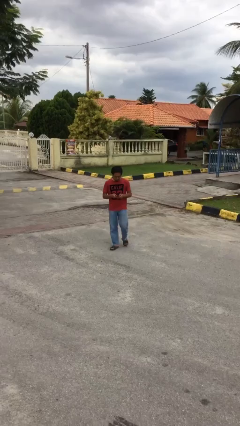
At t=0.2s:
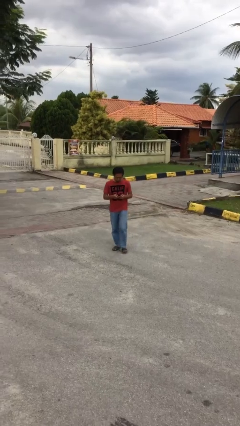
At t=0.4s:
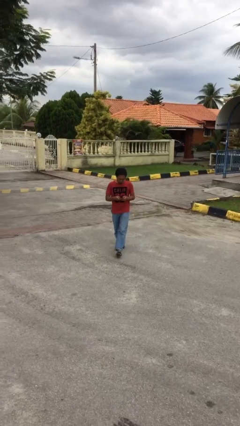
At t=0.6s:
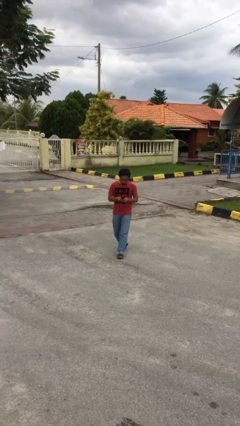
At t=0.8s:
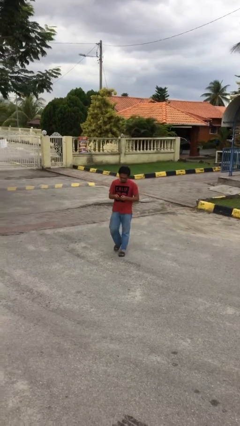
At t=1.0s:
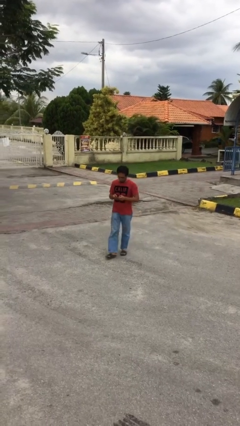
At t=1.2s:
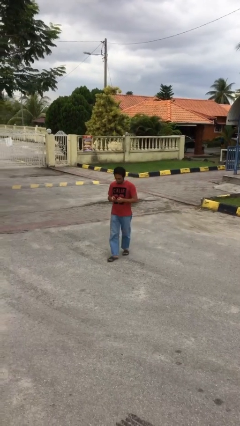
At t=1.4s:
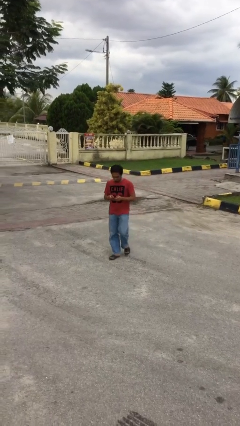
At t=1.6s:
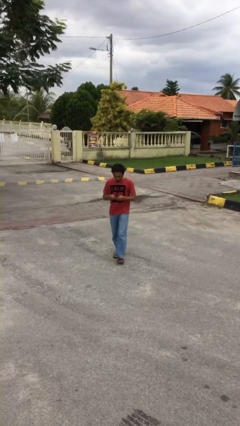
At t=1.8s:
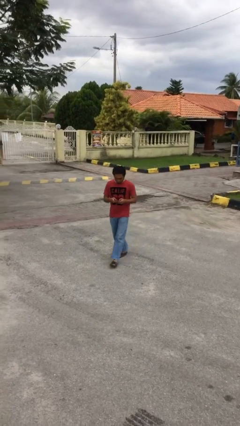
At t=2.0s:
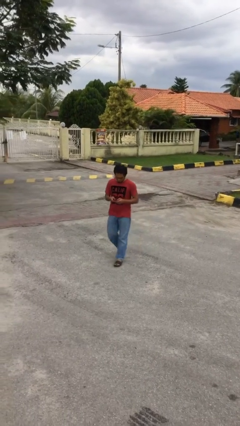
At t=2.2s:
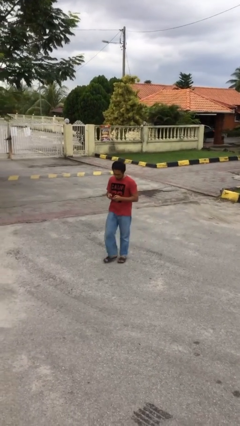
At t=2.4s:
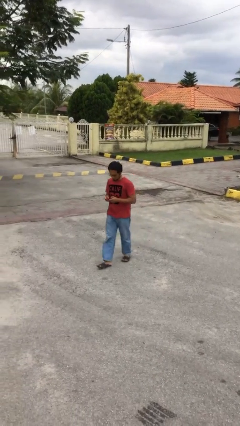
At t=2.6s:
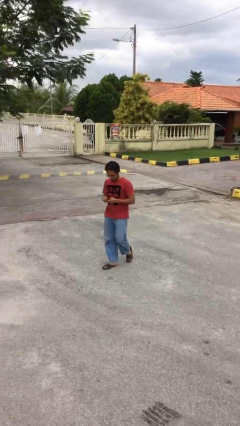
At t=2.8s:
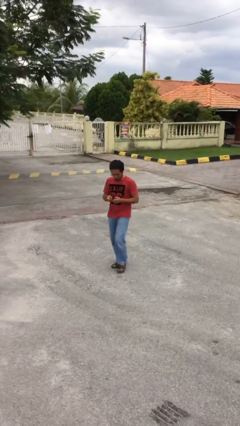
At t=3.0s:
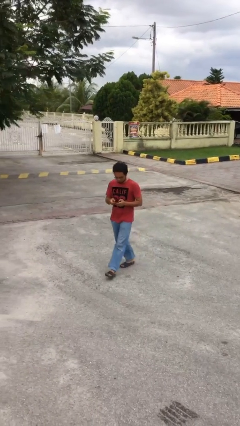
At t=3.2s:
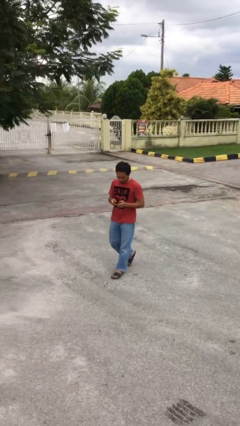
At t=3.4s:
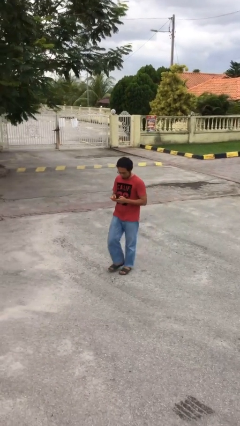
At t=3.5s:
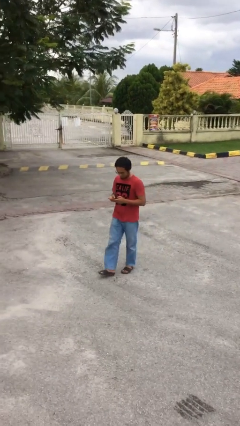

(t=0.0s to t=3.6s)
person texts on phone

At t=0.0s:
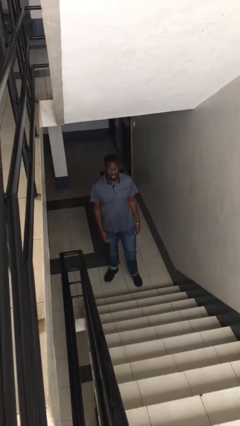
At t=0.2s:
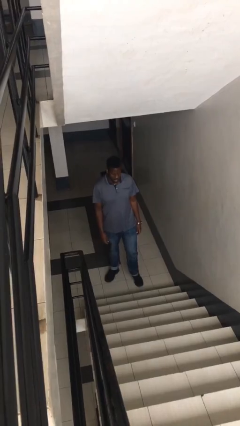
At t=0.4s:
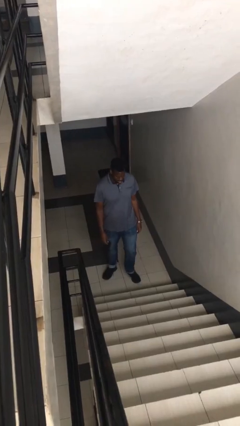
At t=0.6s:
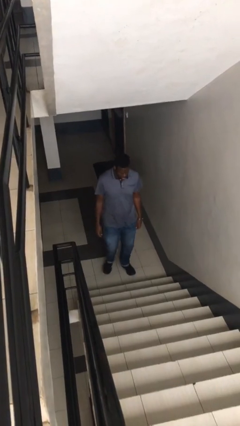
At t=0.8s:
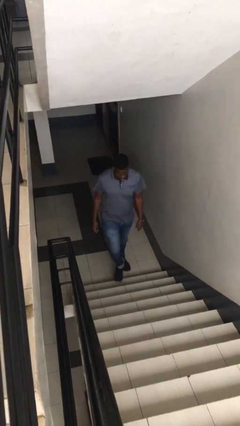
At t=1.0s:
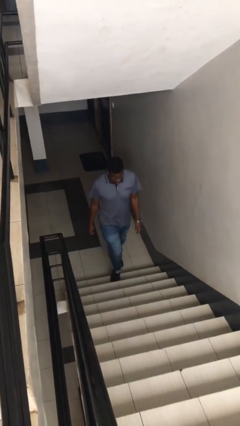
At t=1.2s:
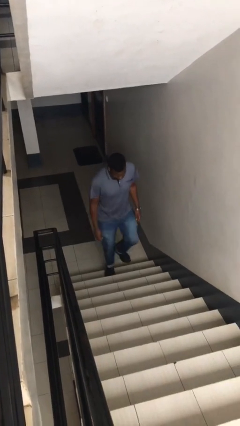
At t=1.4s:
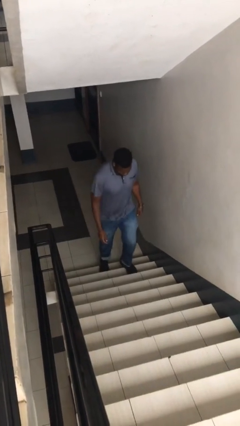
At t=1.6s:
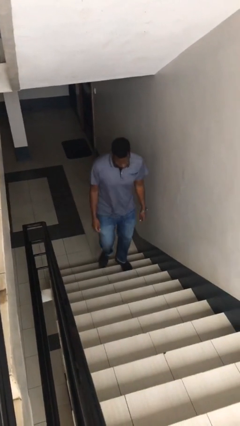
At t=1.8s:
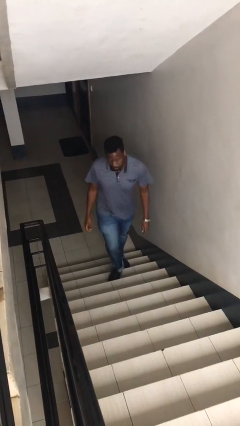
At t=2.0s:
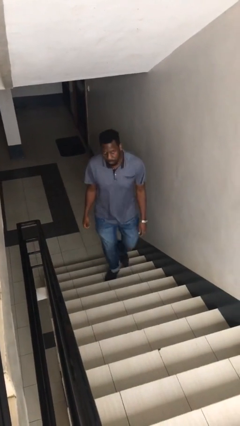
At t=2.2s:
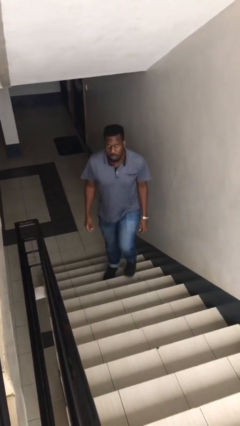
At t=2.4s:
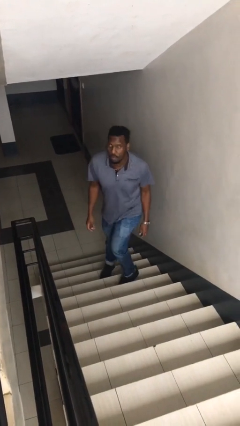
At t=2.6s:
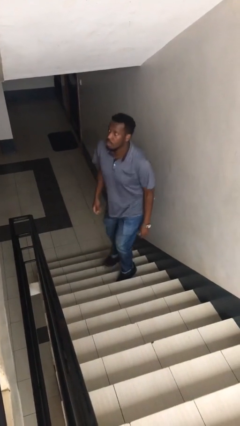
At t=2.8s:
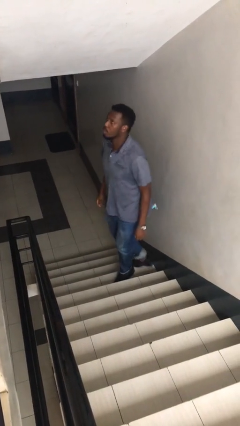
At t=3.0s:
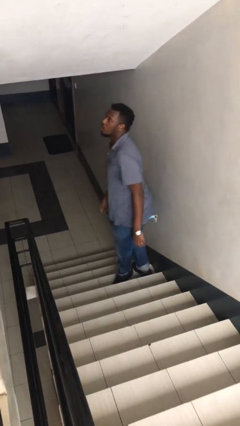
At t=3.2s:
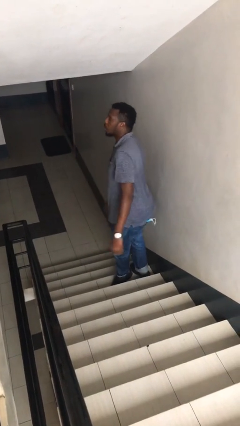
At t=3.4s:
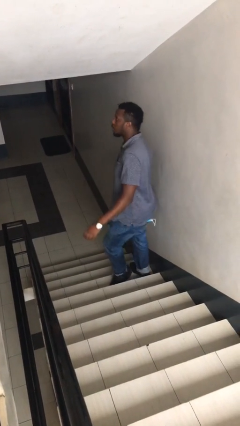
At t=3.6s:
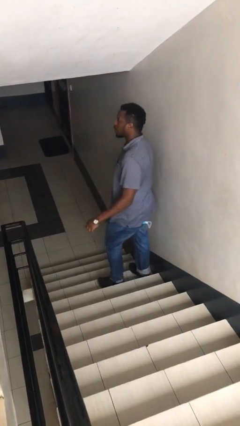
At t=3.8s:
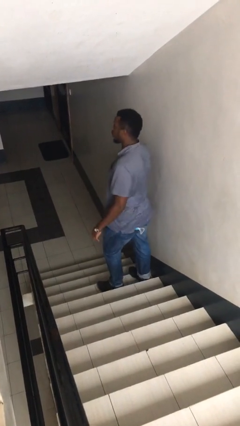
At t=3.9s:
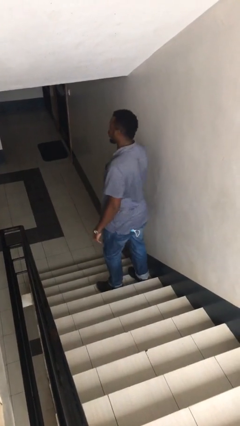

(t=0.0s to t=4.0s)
person climbs up stairs

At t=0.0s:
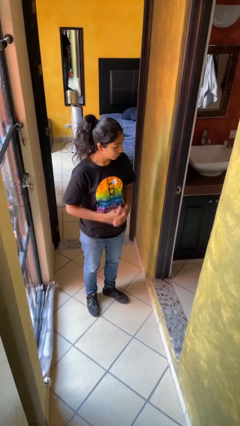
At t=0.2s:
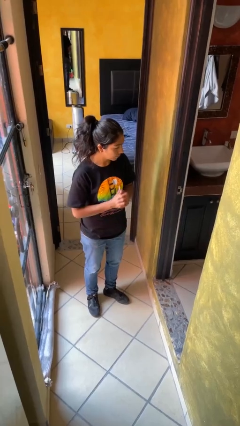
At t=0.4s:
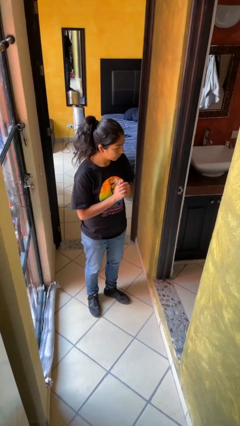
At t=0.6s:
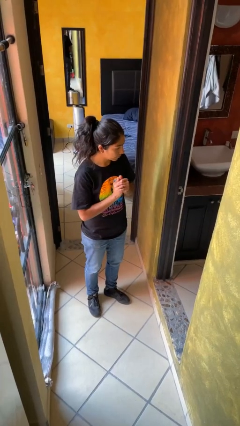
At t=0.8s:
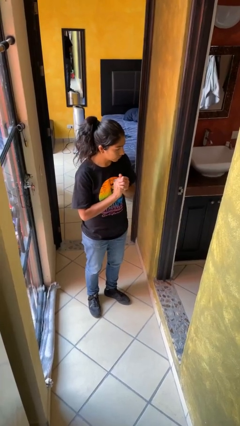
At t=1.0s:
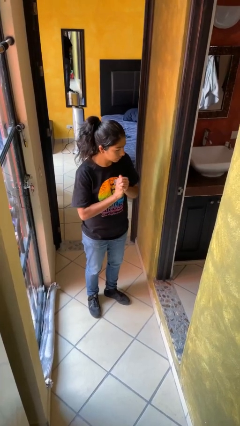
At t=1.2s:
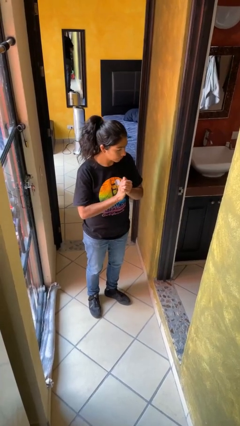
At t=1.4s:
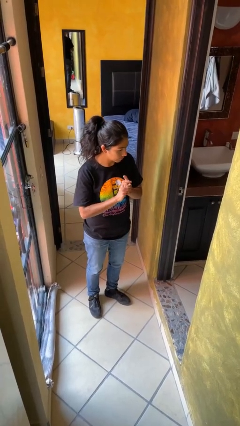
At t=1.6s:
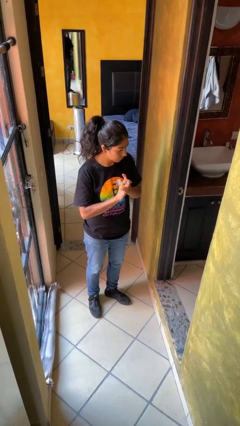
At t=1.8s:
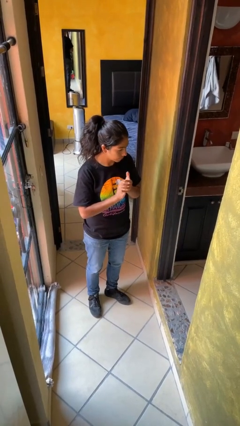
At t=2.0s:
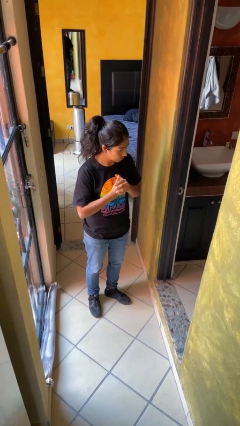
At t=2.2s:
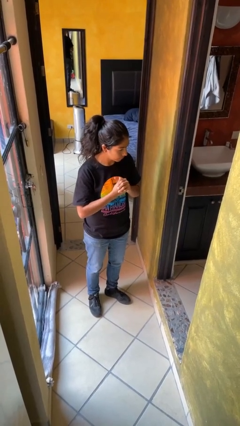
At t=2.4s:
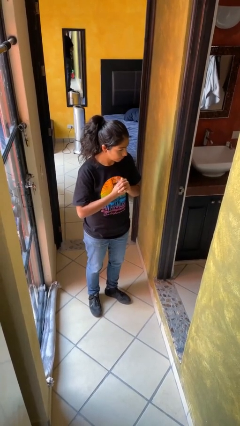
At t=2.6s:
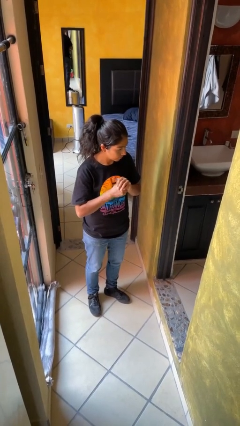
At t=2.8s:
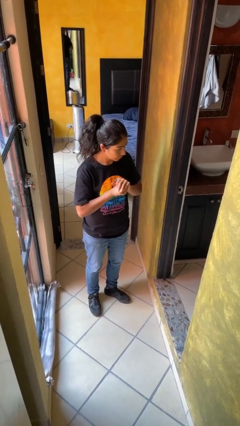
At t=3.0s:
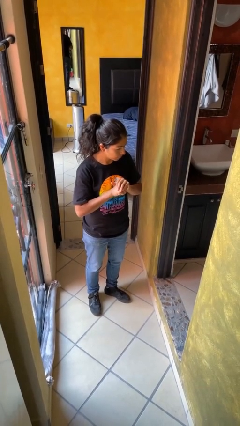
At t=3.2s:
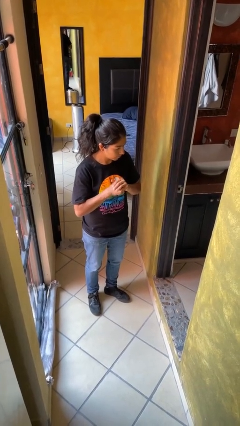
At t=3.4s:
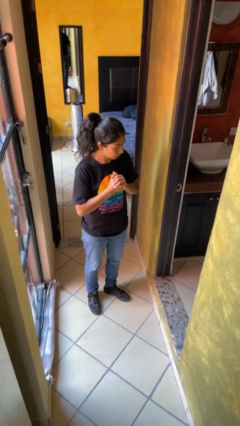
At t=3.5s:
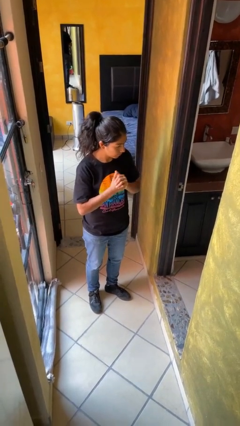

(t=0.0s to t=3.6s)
person cracks knuckles

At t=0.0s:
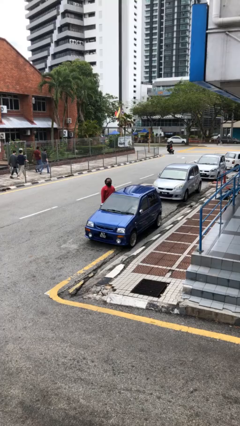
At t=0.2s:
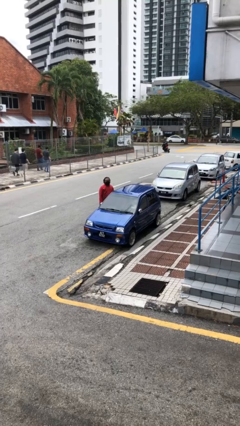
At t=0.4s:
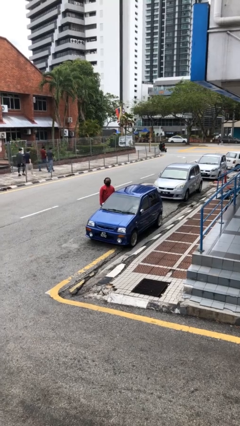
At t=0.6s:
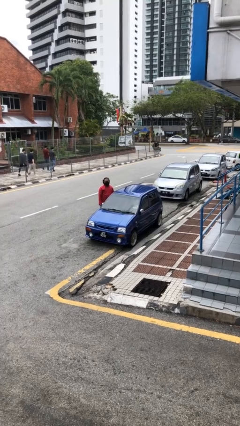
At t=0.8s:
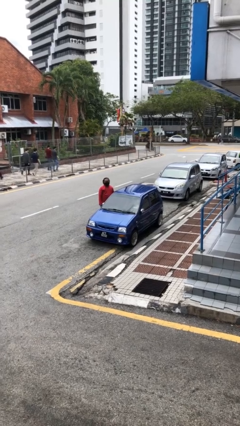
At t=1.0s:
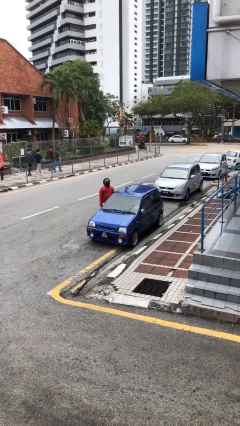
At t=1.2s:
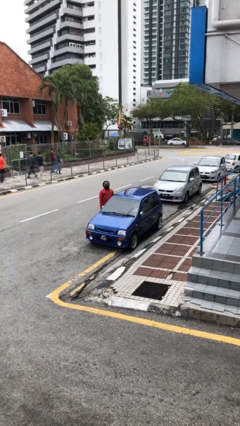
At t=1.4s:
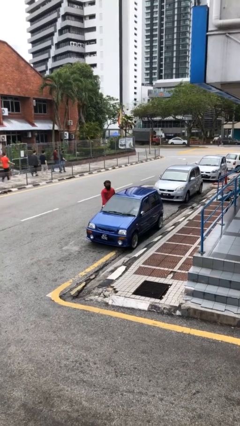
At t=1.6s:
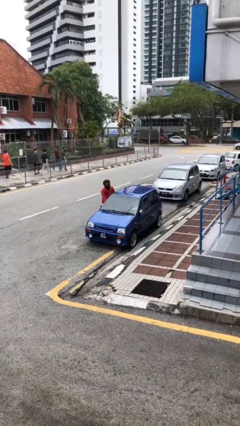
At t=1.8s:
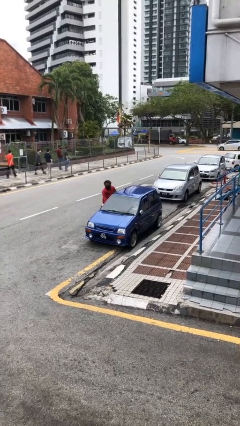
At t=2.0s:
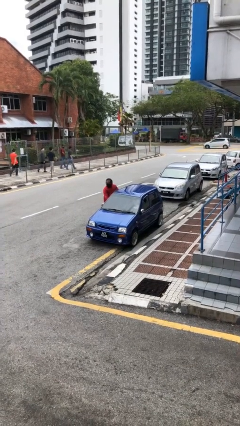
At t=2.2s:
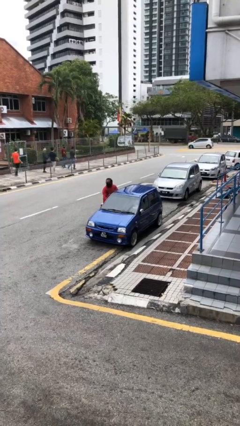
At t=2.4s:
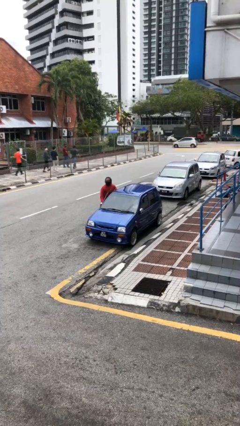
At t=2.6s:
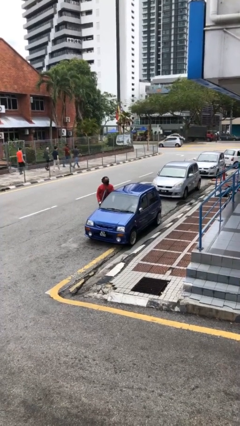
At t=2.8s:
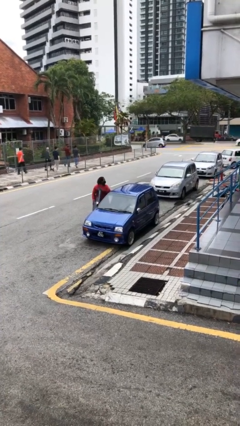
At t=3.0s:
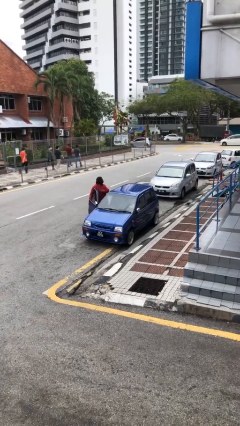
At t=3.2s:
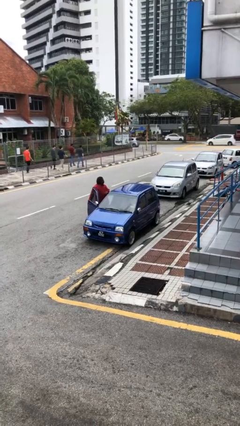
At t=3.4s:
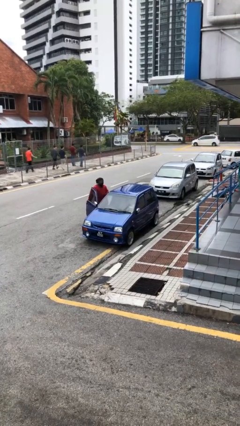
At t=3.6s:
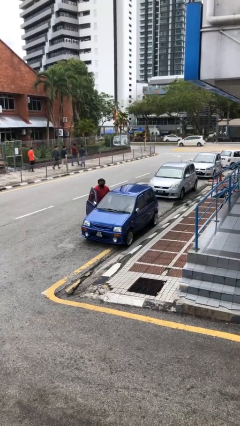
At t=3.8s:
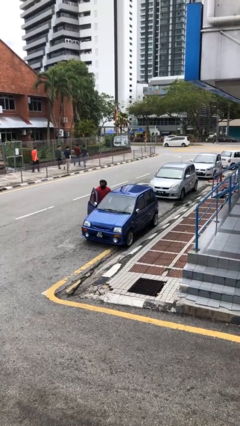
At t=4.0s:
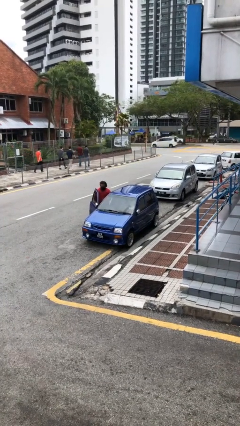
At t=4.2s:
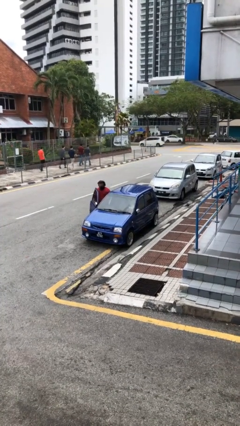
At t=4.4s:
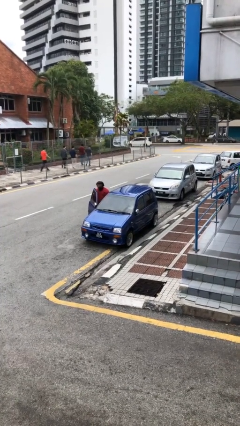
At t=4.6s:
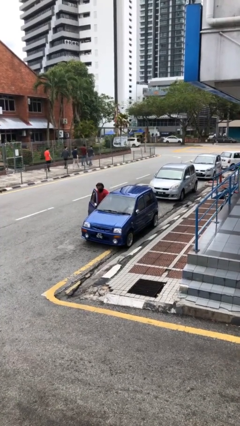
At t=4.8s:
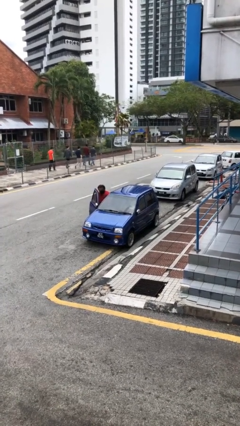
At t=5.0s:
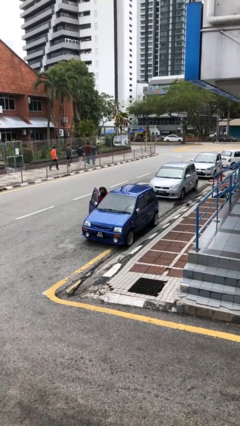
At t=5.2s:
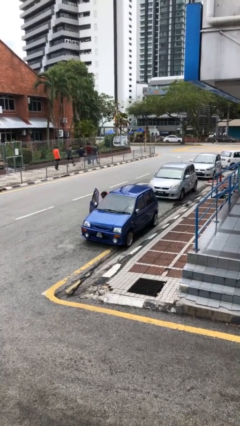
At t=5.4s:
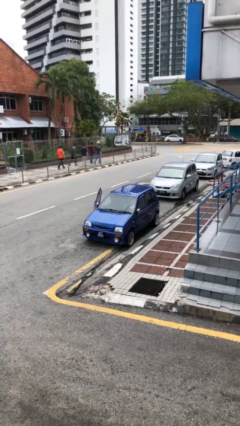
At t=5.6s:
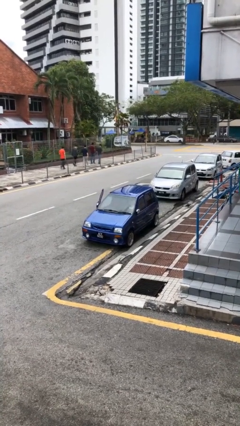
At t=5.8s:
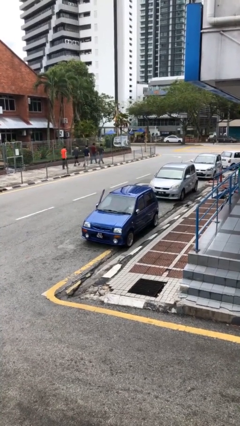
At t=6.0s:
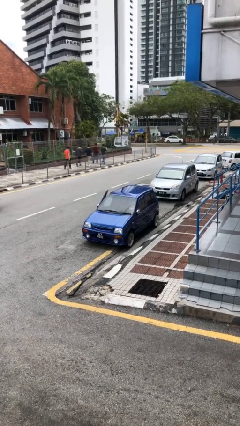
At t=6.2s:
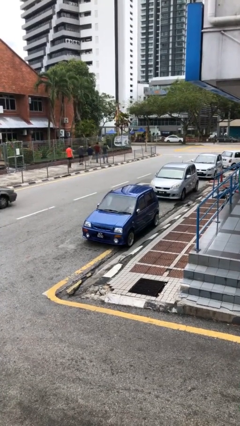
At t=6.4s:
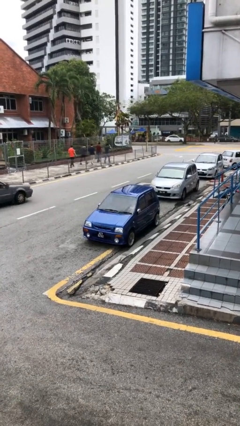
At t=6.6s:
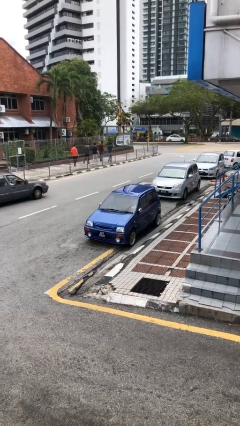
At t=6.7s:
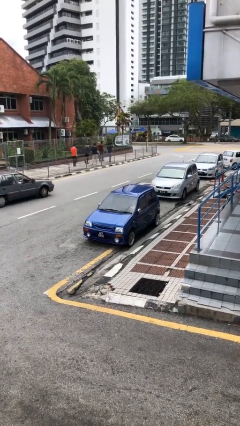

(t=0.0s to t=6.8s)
car picks up person
